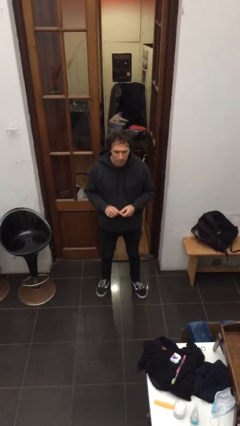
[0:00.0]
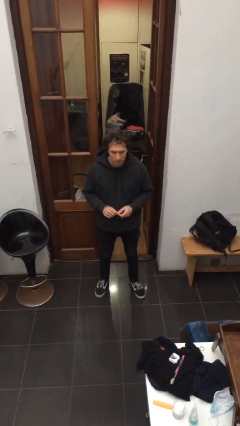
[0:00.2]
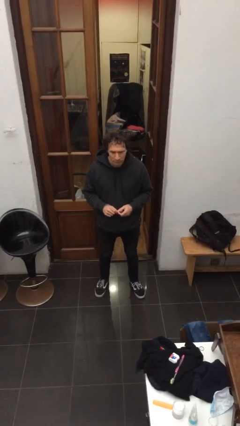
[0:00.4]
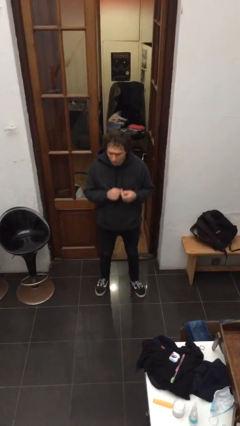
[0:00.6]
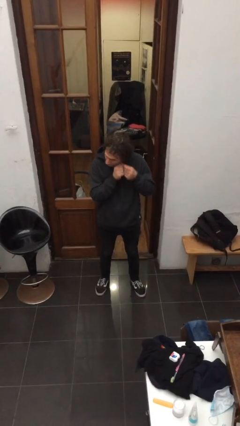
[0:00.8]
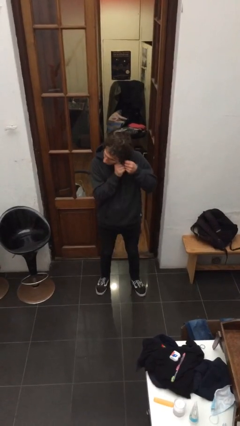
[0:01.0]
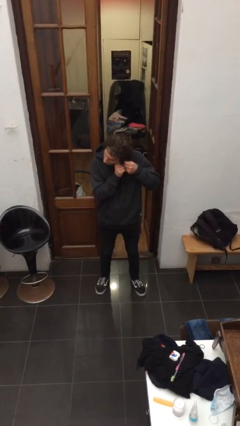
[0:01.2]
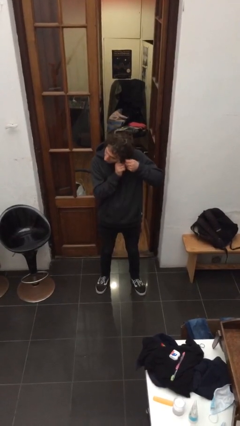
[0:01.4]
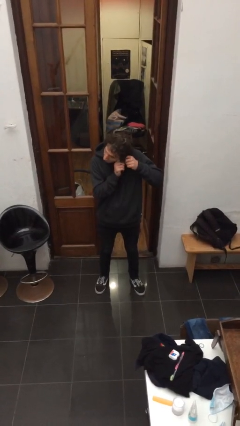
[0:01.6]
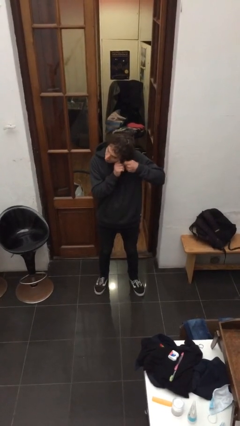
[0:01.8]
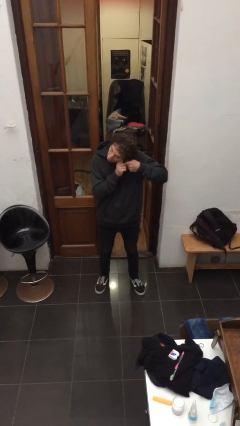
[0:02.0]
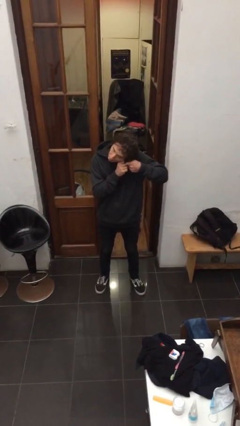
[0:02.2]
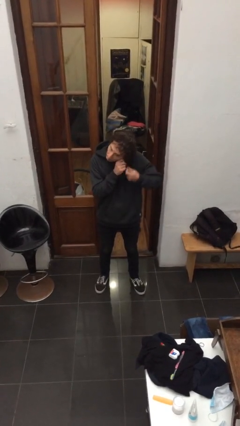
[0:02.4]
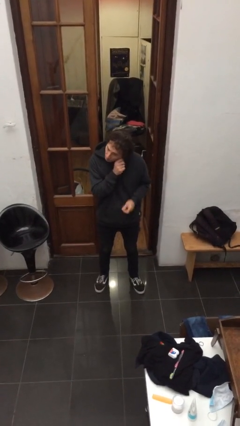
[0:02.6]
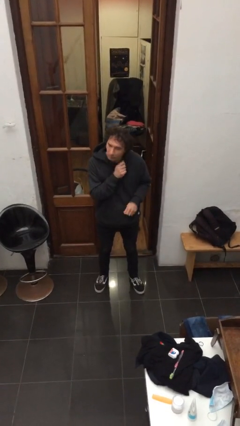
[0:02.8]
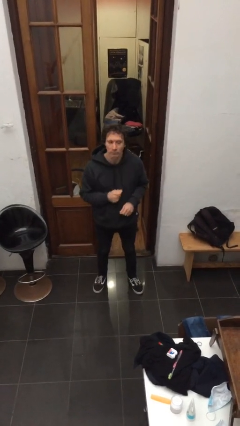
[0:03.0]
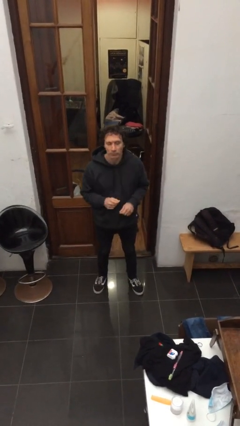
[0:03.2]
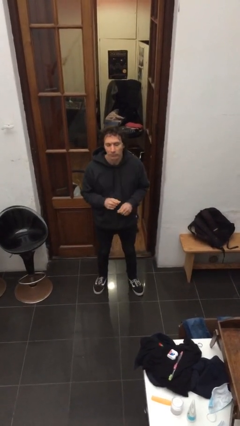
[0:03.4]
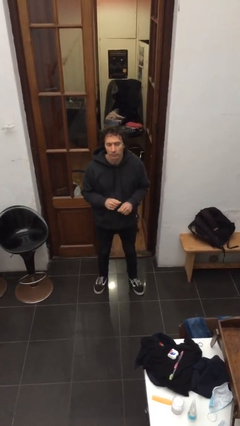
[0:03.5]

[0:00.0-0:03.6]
person puts on earrings

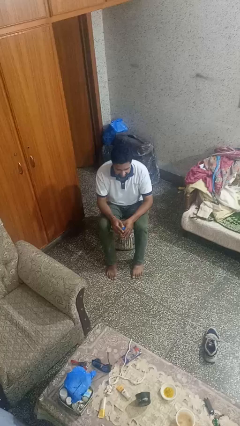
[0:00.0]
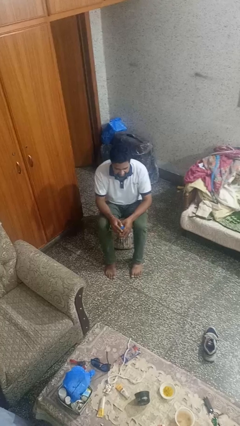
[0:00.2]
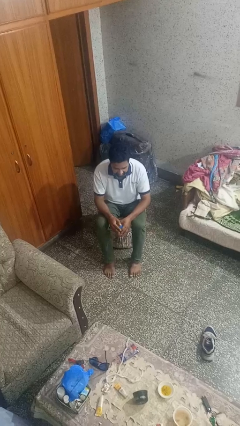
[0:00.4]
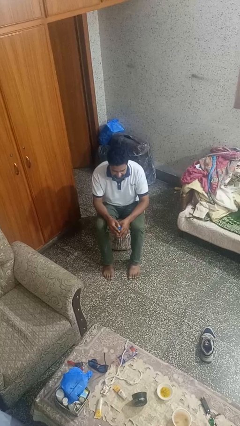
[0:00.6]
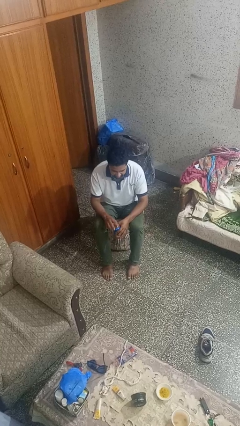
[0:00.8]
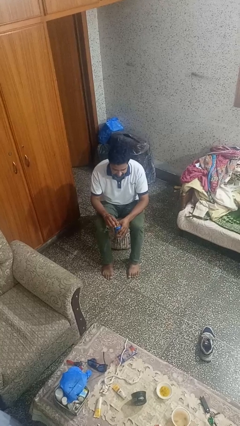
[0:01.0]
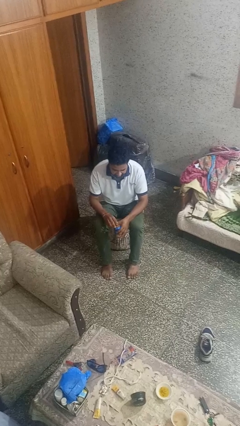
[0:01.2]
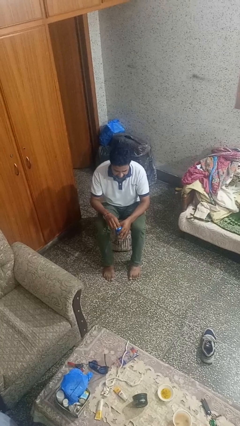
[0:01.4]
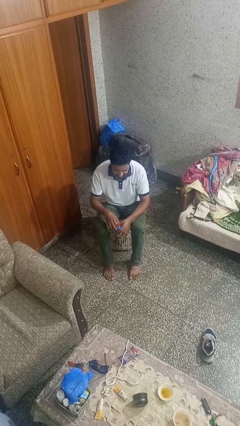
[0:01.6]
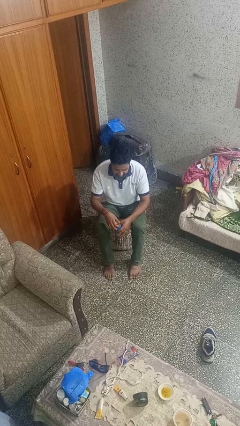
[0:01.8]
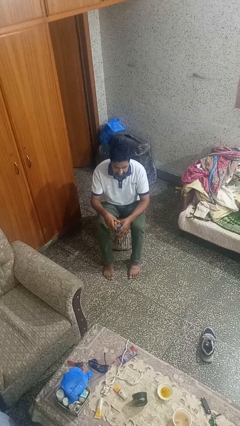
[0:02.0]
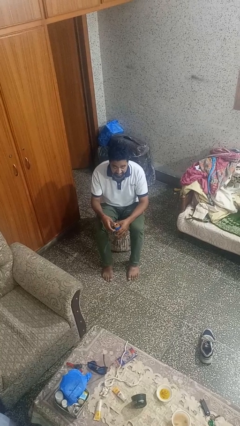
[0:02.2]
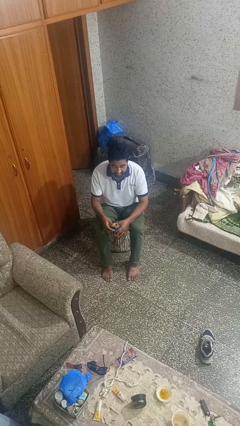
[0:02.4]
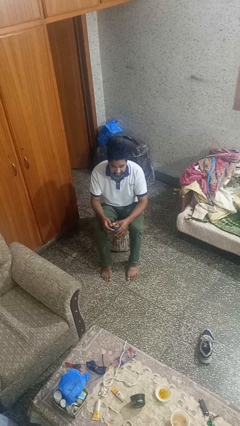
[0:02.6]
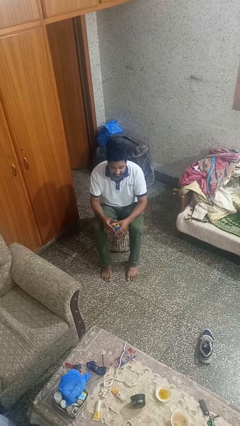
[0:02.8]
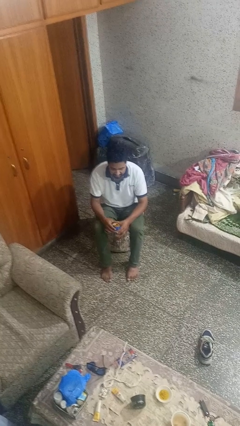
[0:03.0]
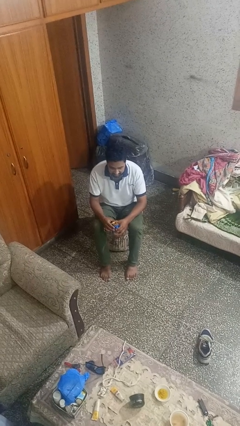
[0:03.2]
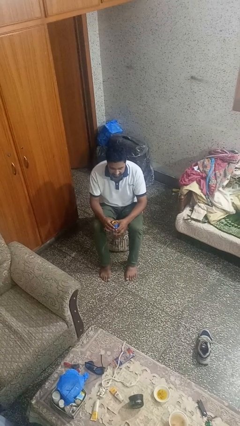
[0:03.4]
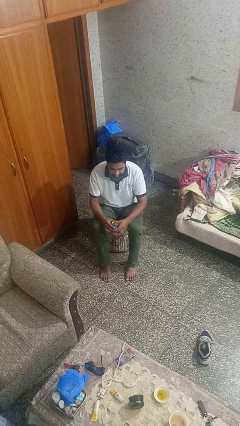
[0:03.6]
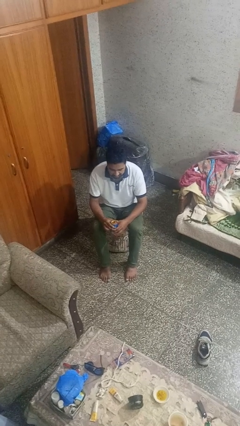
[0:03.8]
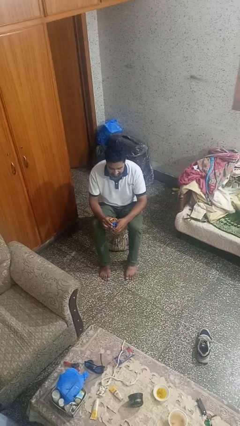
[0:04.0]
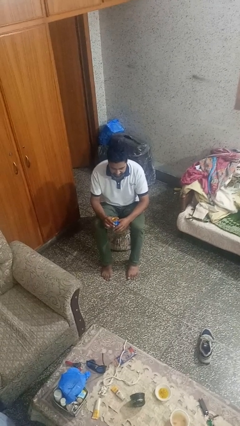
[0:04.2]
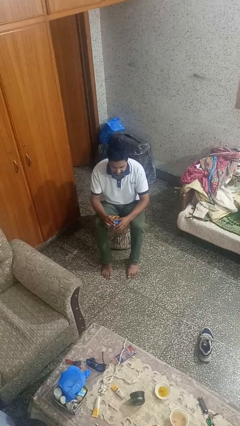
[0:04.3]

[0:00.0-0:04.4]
person opens beverage can

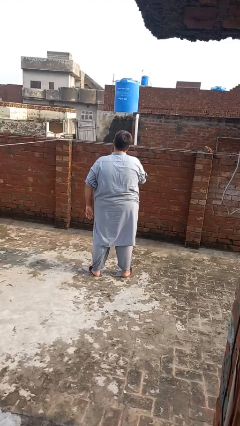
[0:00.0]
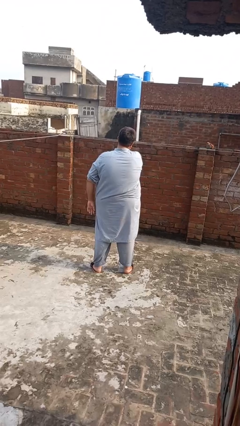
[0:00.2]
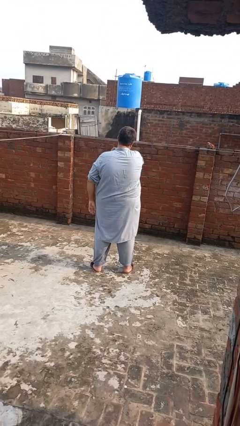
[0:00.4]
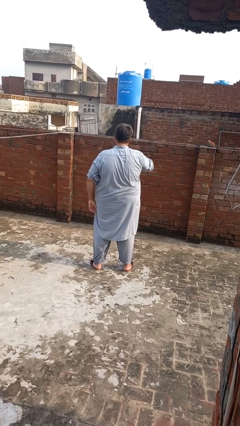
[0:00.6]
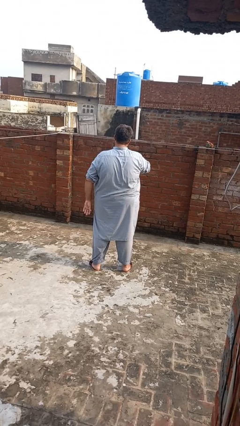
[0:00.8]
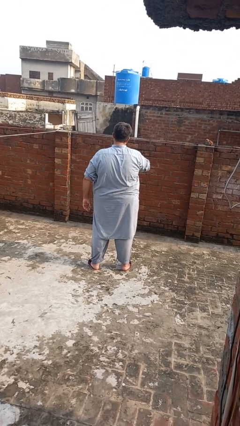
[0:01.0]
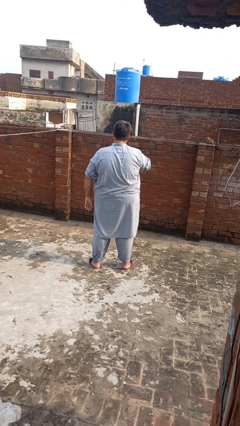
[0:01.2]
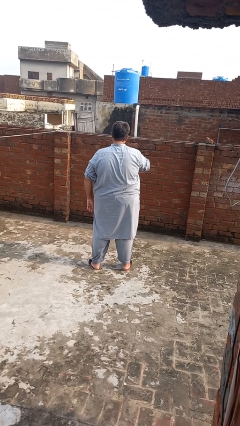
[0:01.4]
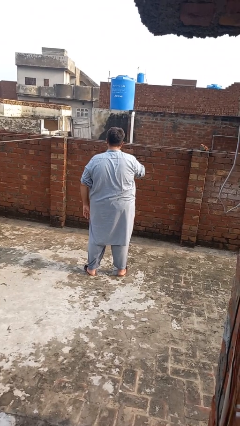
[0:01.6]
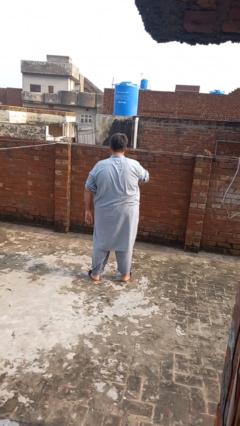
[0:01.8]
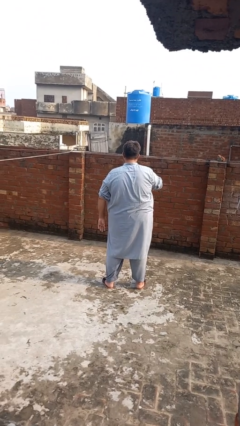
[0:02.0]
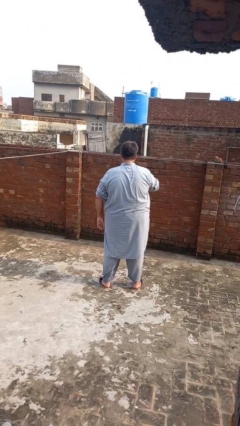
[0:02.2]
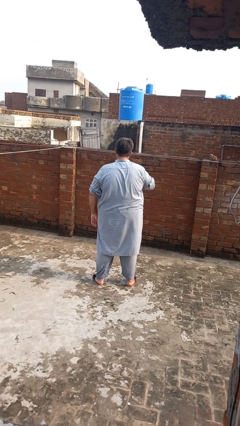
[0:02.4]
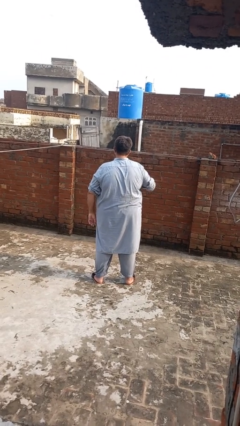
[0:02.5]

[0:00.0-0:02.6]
person gestures cut

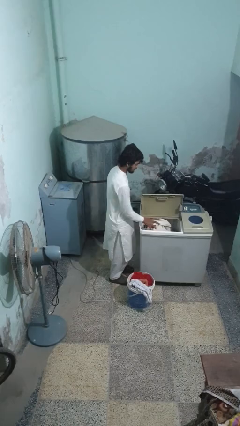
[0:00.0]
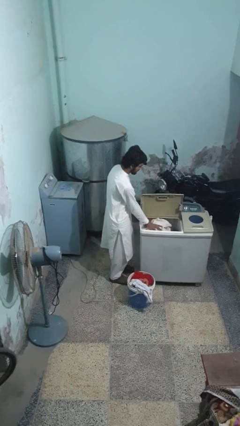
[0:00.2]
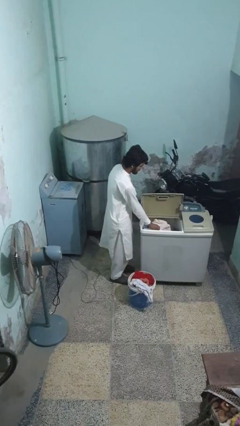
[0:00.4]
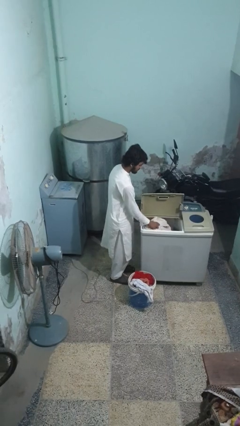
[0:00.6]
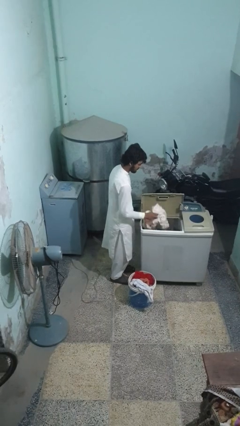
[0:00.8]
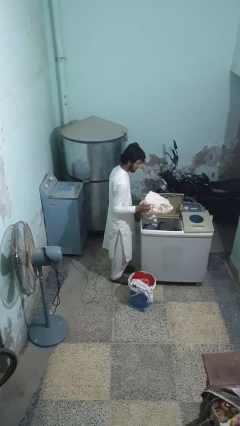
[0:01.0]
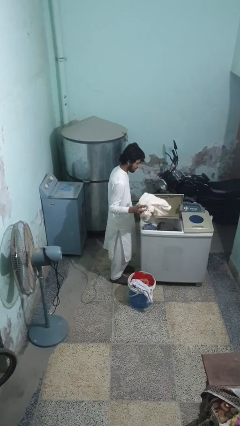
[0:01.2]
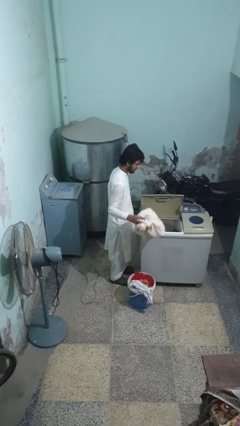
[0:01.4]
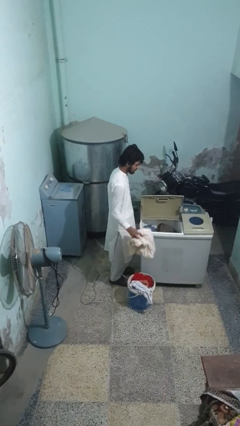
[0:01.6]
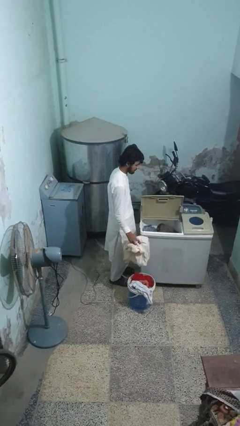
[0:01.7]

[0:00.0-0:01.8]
person unloads clotheswasher

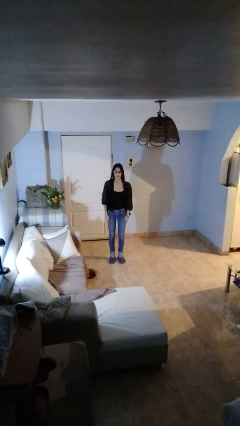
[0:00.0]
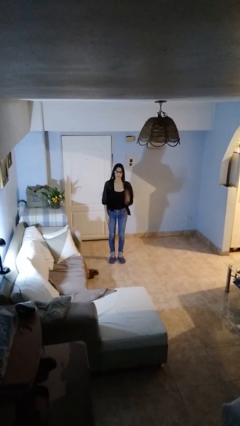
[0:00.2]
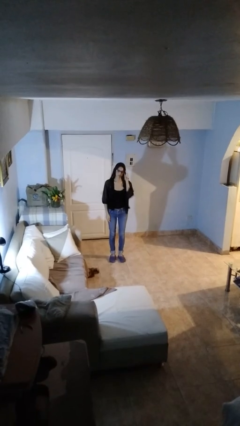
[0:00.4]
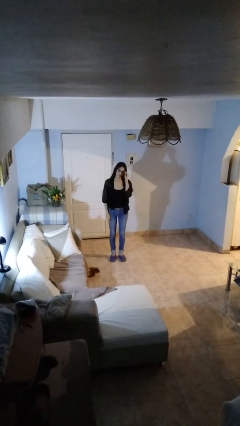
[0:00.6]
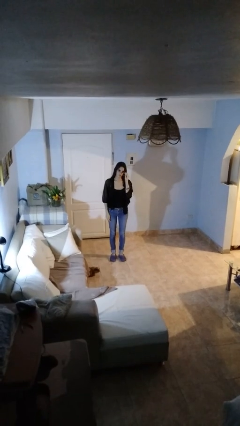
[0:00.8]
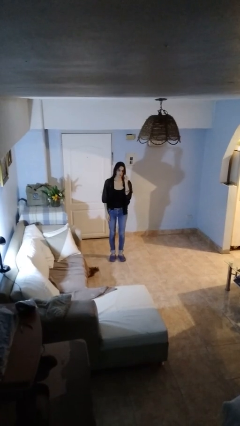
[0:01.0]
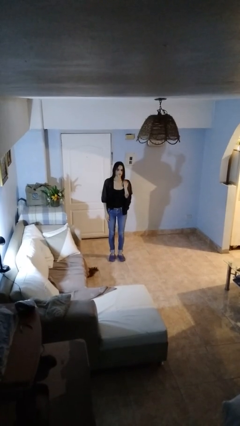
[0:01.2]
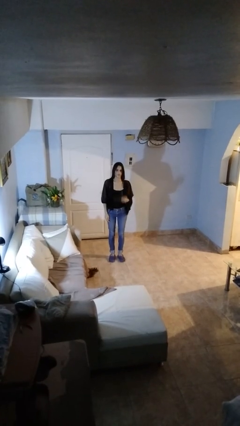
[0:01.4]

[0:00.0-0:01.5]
person takes off glasses

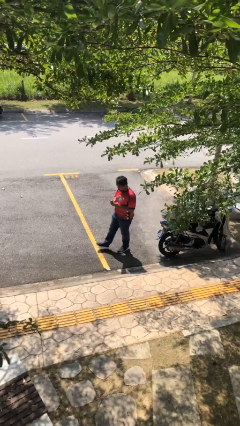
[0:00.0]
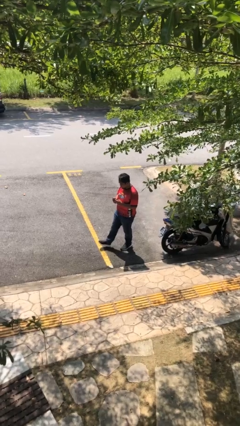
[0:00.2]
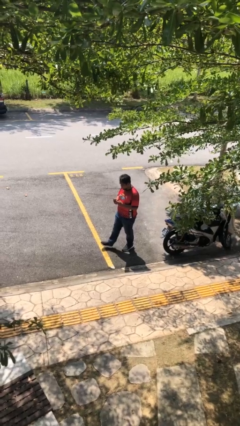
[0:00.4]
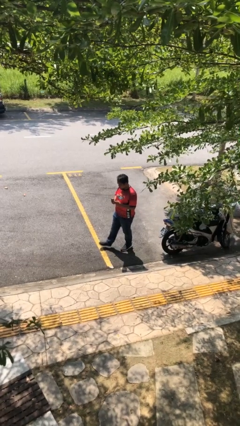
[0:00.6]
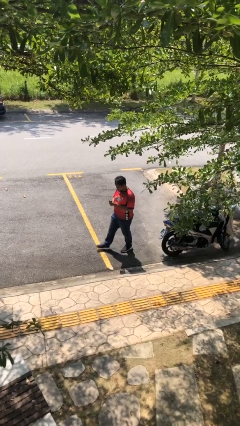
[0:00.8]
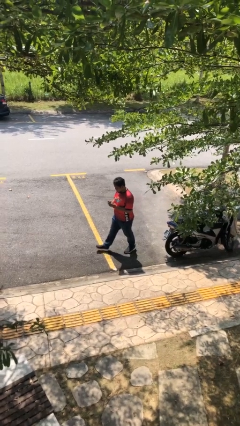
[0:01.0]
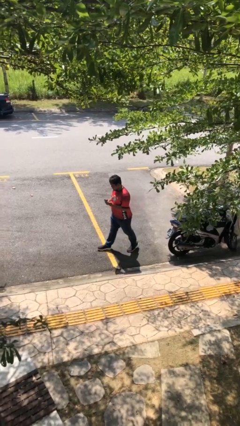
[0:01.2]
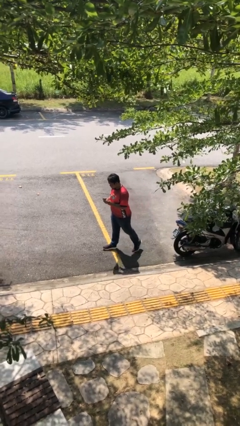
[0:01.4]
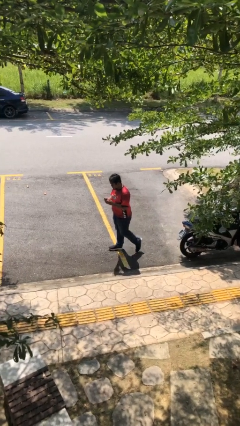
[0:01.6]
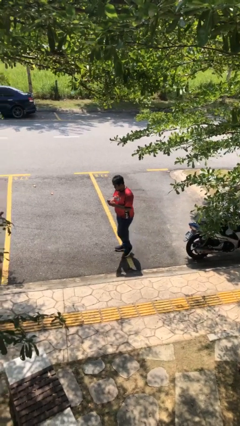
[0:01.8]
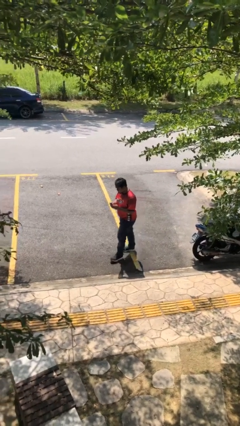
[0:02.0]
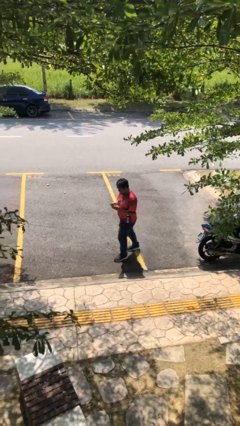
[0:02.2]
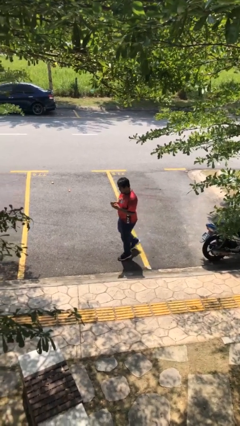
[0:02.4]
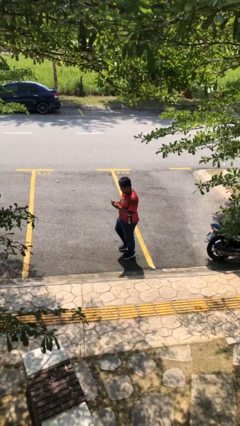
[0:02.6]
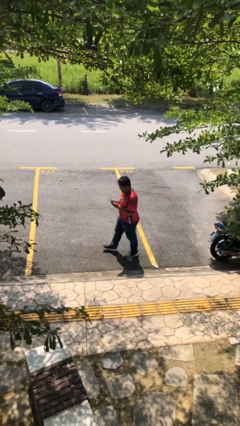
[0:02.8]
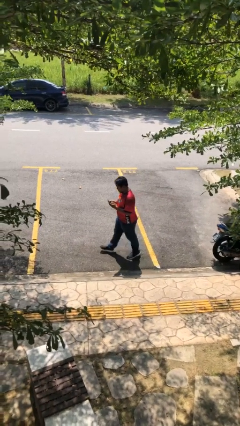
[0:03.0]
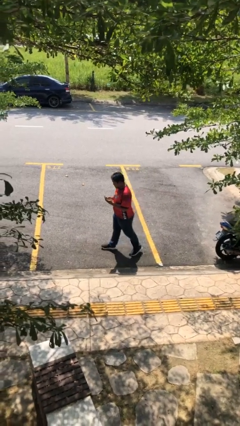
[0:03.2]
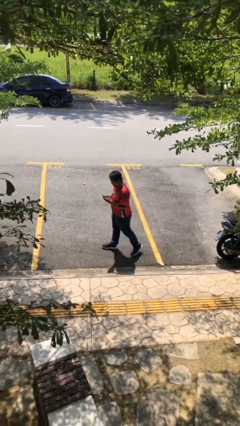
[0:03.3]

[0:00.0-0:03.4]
person texts on phone

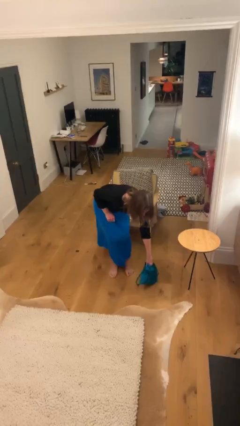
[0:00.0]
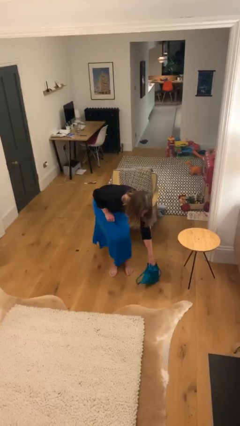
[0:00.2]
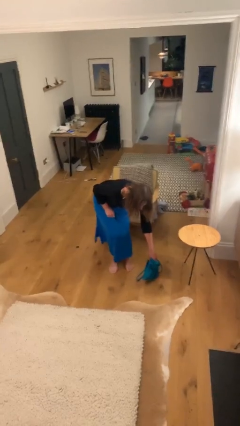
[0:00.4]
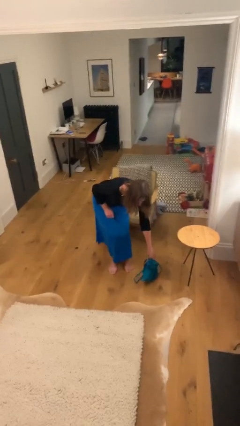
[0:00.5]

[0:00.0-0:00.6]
person puts down object on floor
